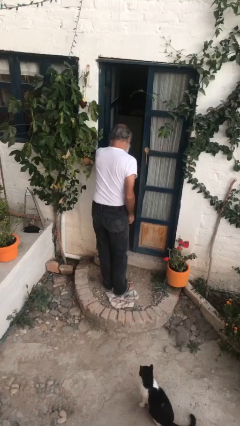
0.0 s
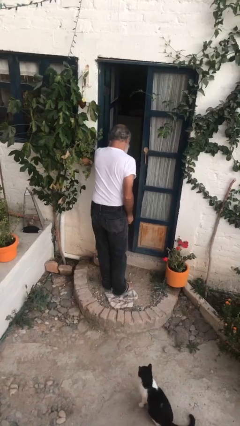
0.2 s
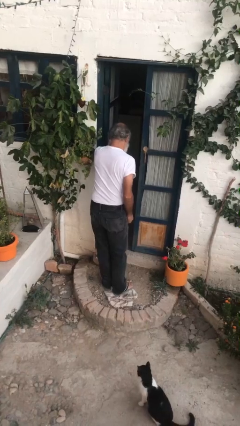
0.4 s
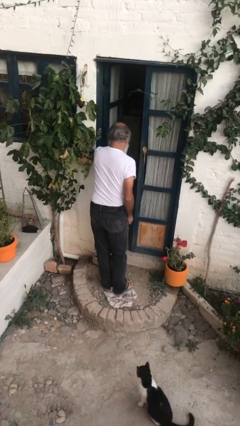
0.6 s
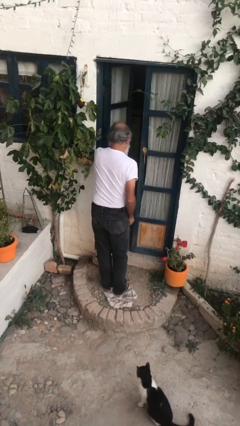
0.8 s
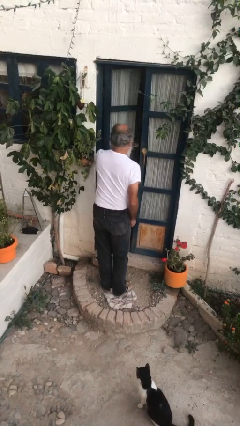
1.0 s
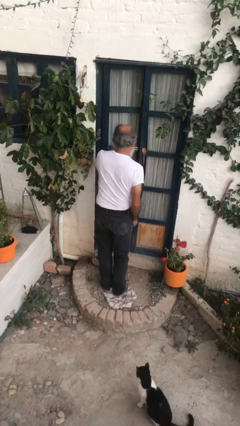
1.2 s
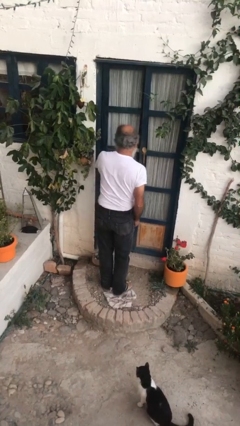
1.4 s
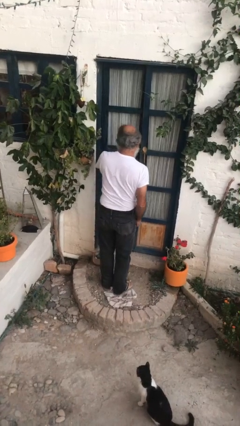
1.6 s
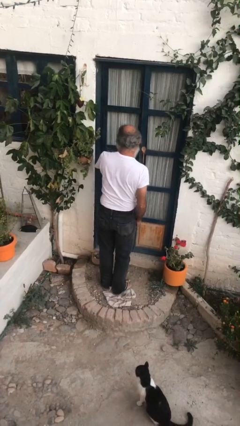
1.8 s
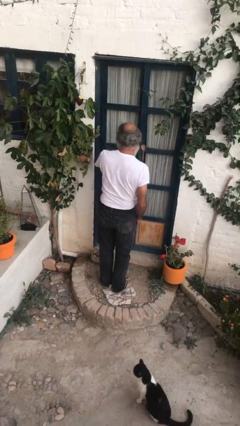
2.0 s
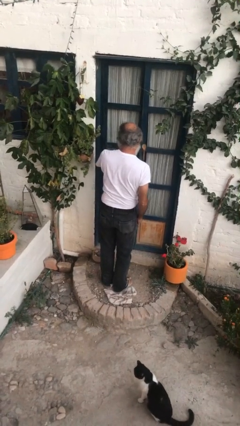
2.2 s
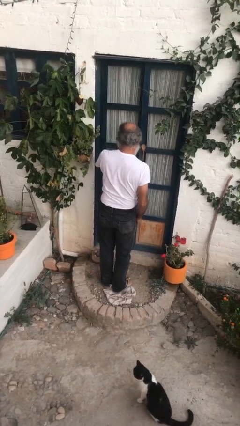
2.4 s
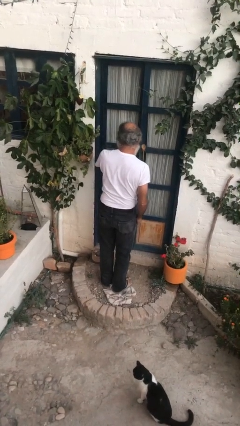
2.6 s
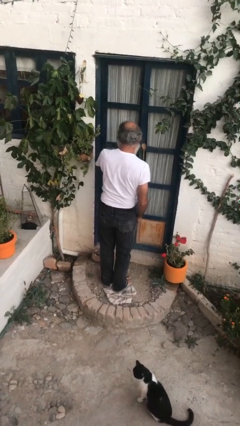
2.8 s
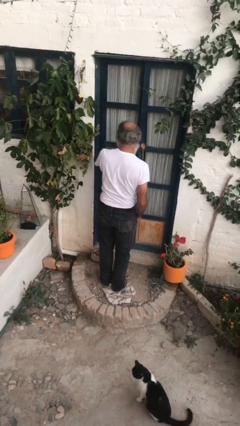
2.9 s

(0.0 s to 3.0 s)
person closes facility door

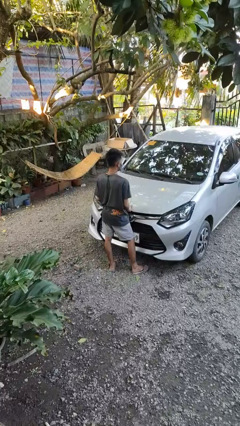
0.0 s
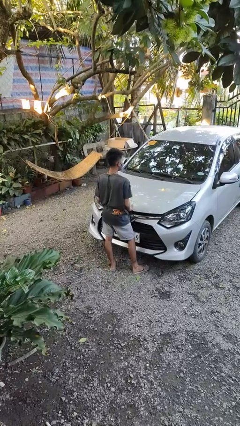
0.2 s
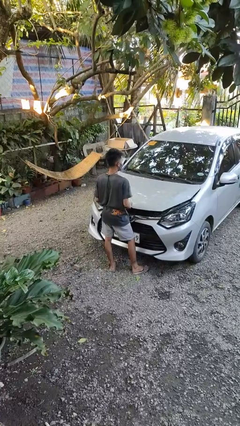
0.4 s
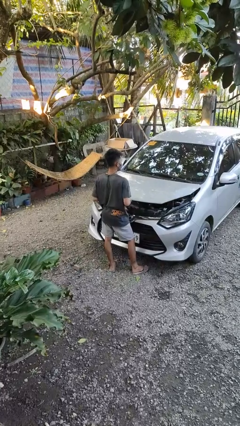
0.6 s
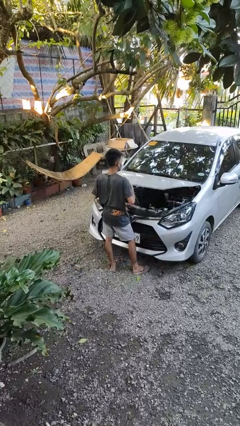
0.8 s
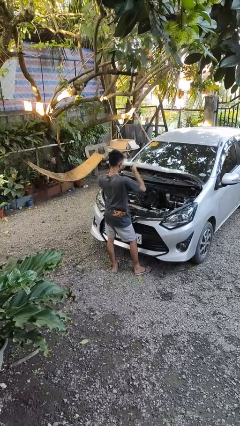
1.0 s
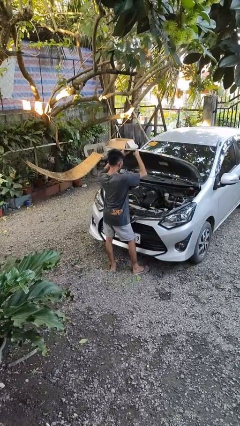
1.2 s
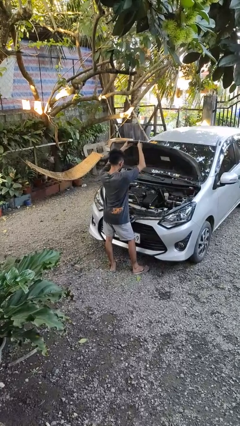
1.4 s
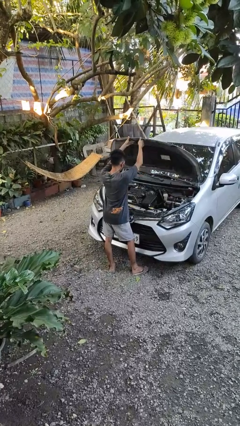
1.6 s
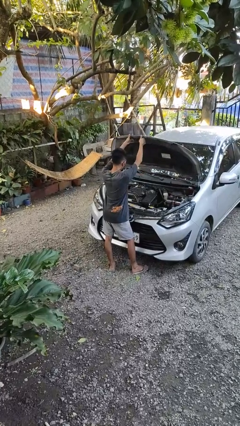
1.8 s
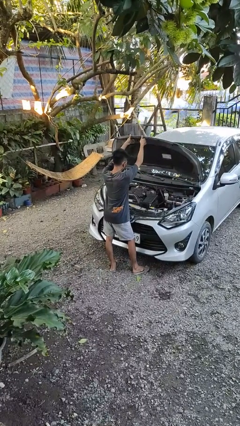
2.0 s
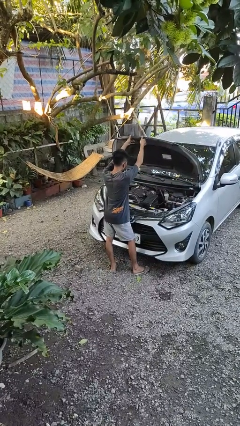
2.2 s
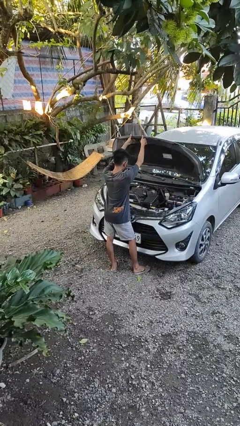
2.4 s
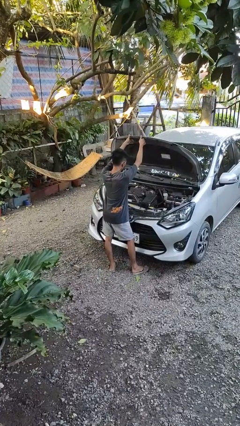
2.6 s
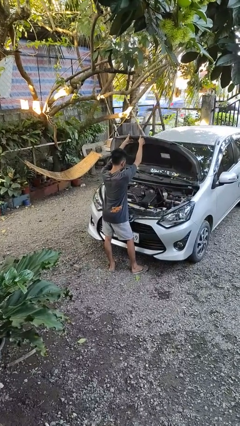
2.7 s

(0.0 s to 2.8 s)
person opens car hood

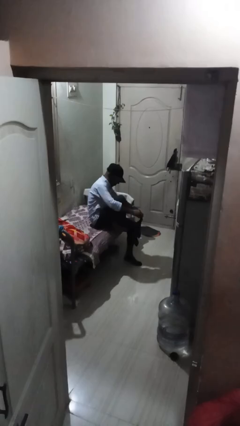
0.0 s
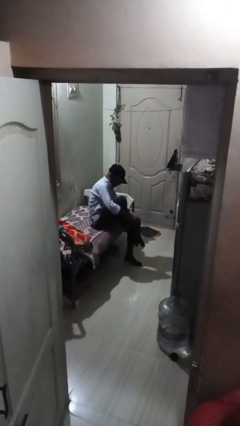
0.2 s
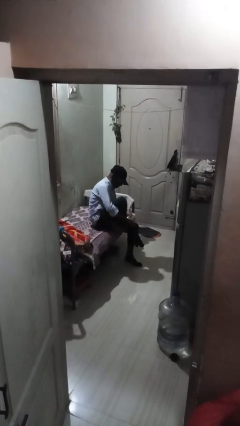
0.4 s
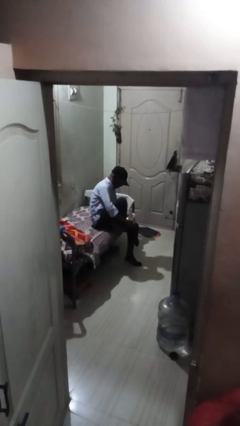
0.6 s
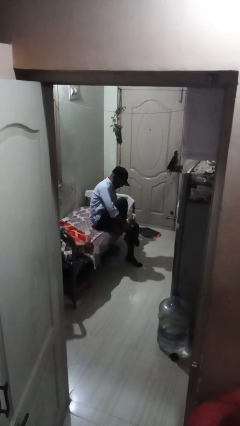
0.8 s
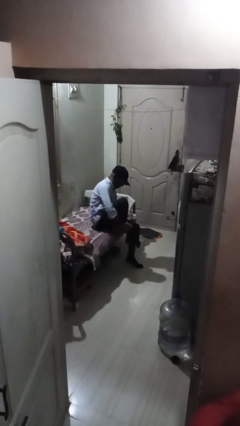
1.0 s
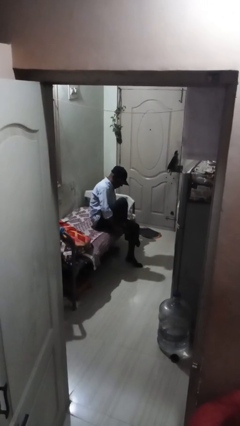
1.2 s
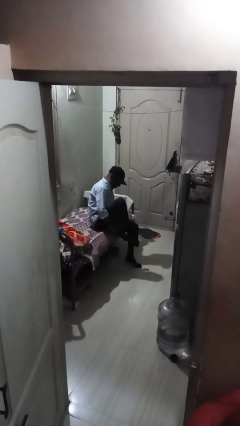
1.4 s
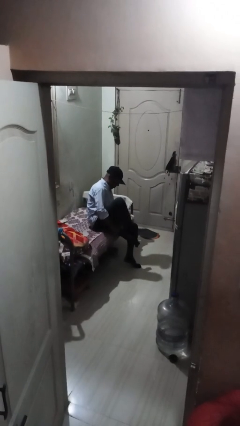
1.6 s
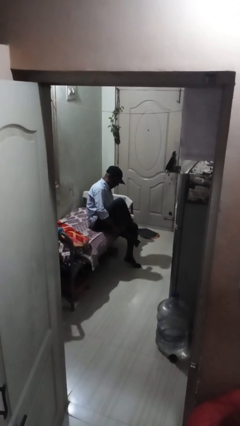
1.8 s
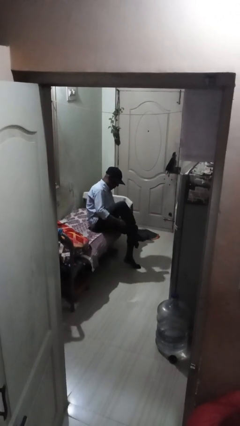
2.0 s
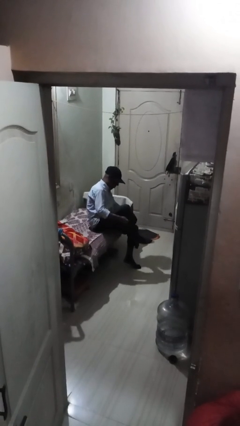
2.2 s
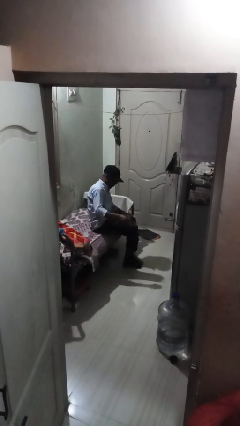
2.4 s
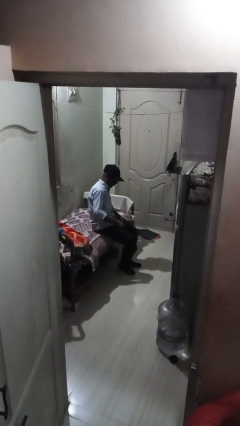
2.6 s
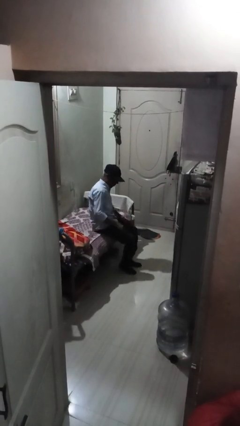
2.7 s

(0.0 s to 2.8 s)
person puts on socks

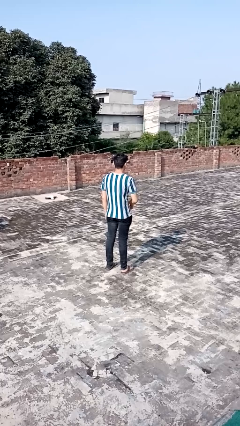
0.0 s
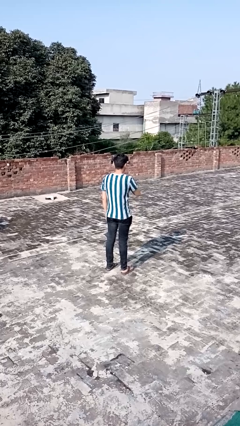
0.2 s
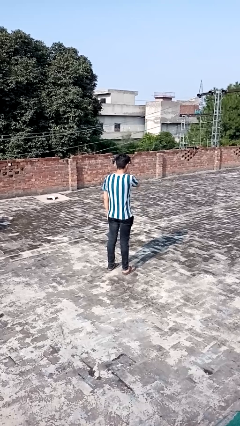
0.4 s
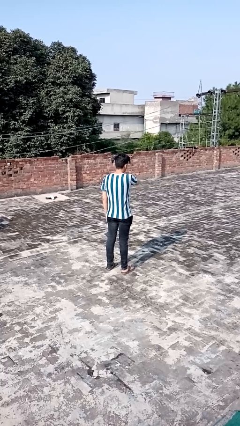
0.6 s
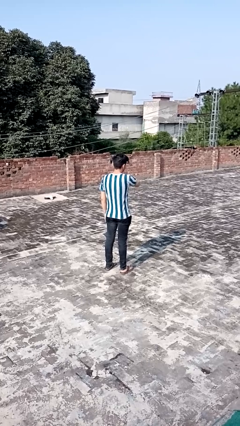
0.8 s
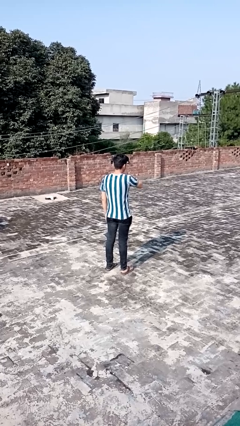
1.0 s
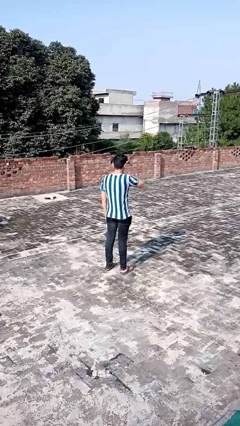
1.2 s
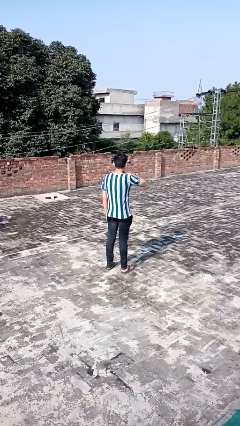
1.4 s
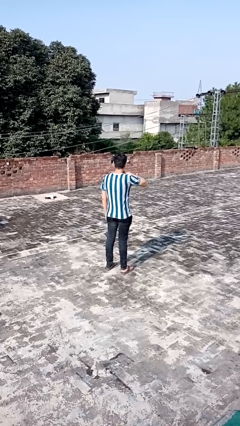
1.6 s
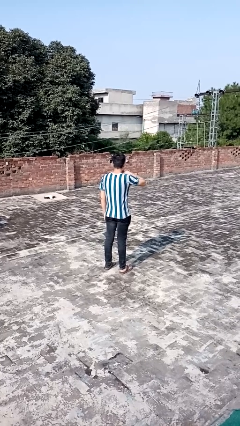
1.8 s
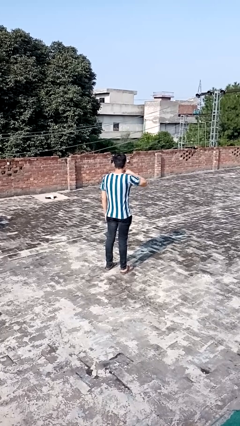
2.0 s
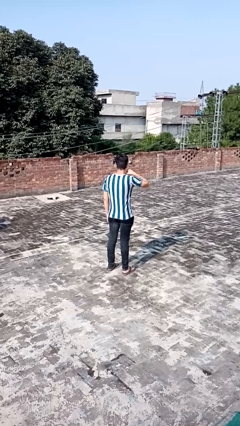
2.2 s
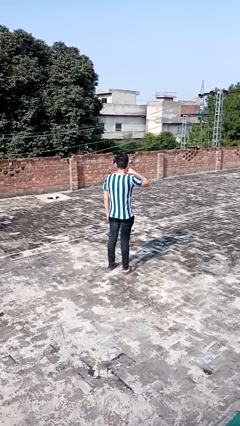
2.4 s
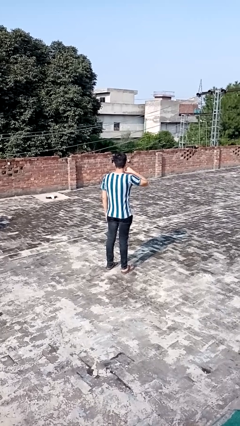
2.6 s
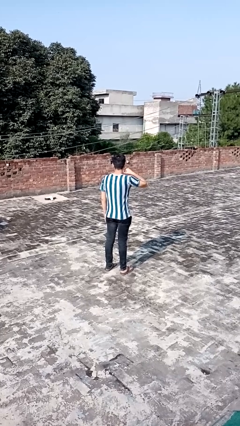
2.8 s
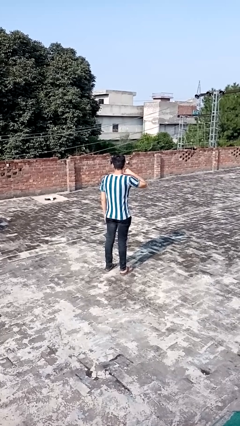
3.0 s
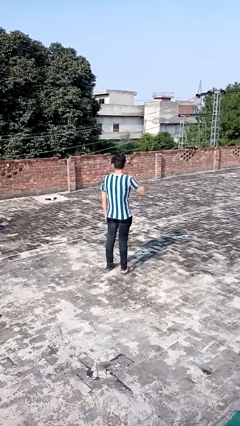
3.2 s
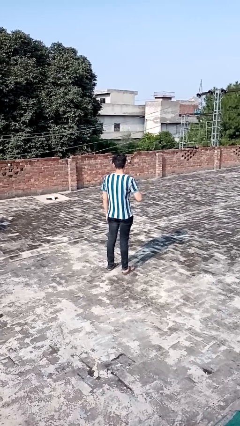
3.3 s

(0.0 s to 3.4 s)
person gestures cut

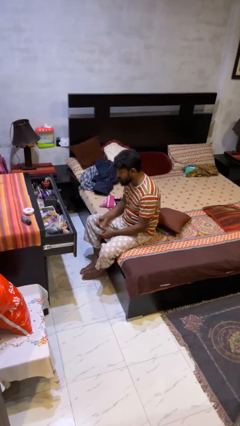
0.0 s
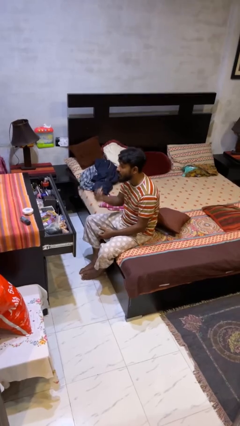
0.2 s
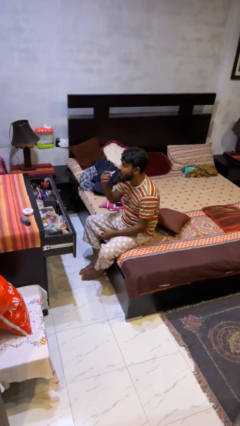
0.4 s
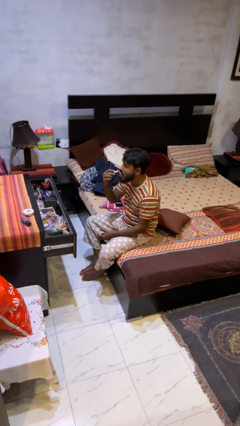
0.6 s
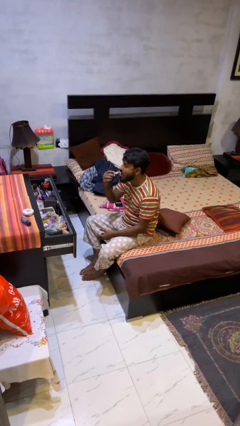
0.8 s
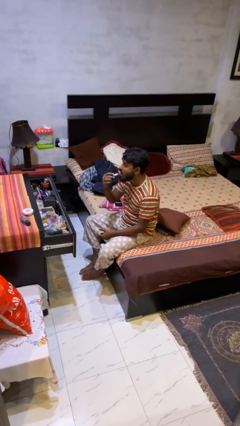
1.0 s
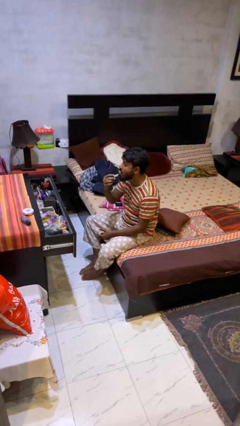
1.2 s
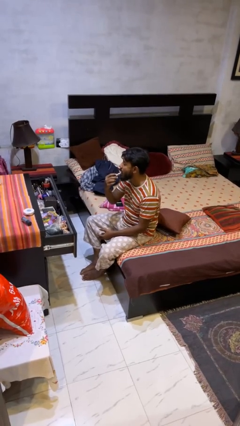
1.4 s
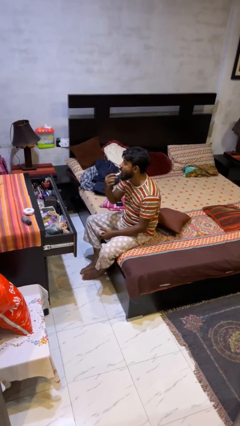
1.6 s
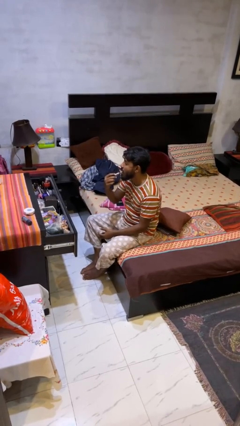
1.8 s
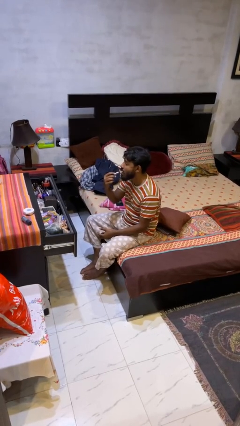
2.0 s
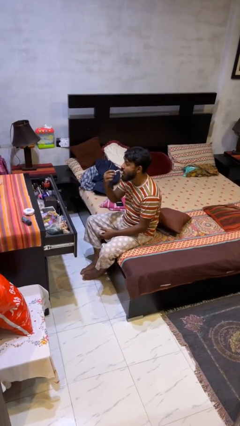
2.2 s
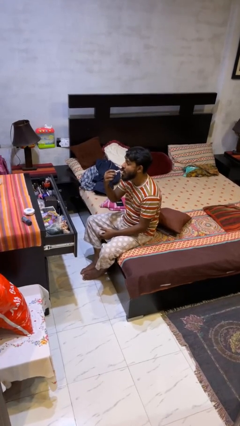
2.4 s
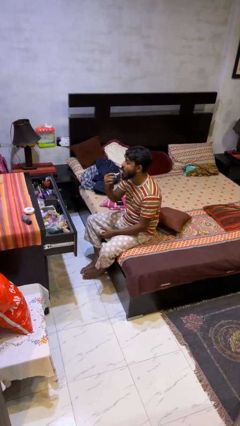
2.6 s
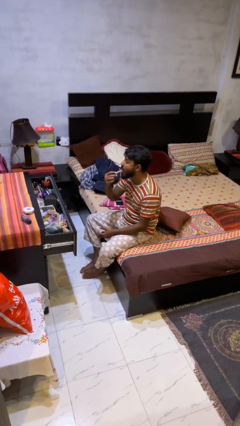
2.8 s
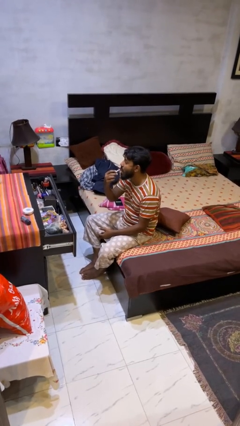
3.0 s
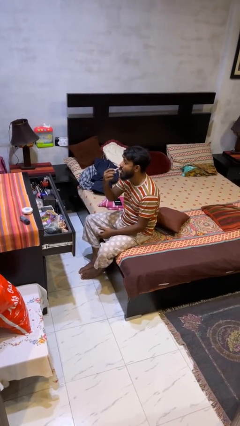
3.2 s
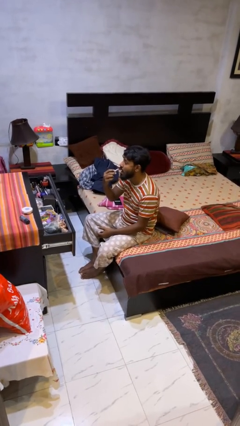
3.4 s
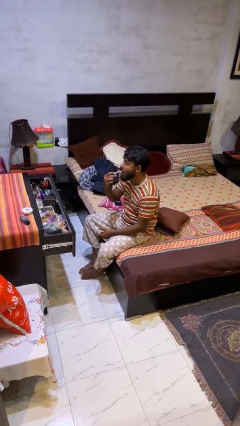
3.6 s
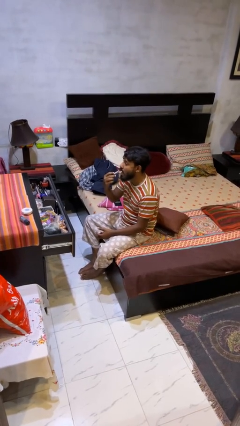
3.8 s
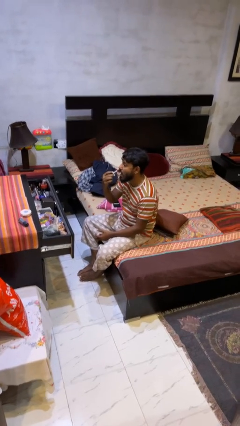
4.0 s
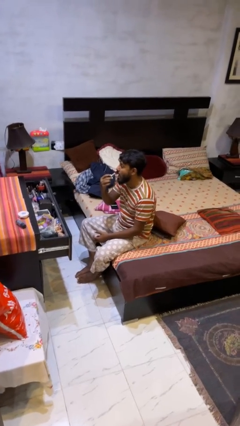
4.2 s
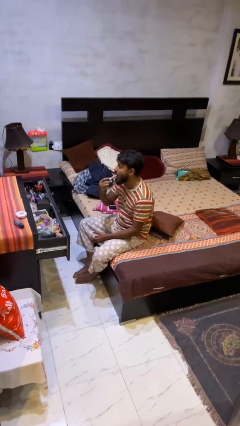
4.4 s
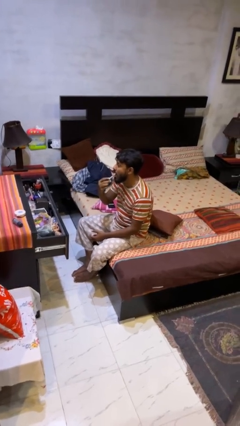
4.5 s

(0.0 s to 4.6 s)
person applies lip makeup

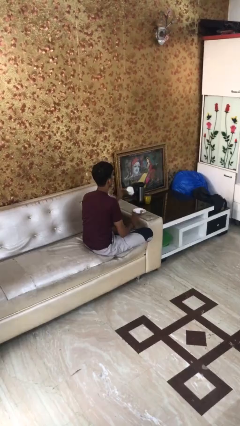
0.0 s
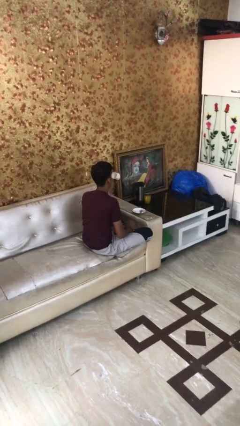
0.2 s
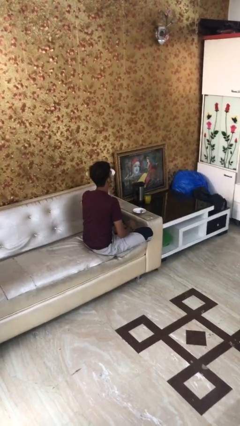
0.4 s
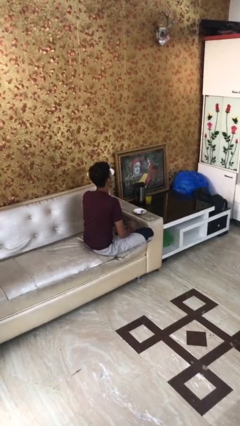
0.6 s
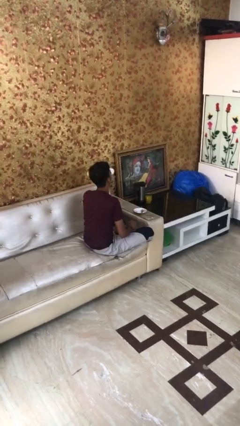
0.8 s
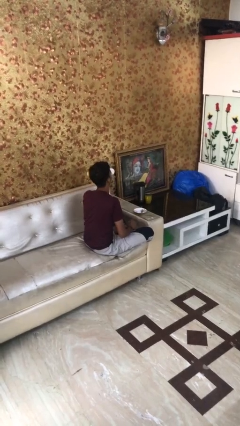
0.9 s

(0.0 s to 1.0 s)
person drinks from mug
